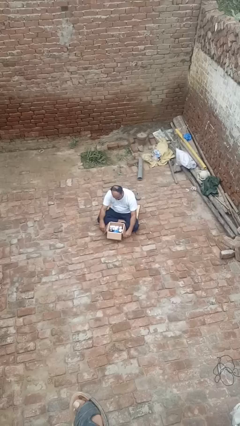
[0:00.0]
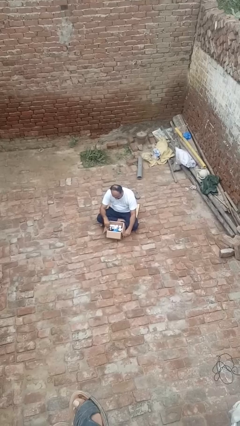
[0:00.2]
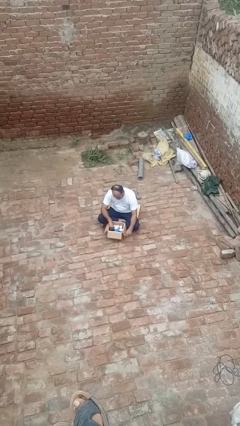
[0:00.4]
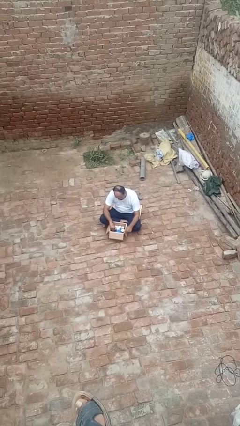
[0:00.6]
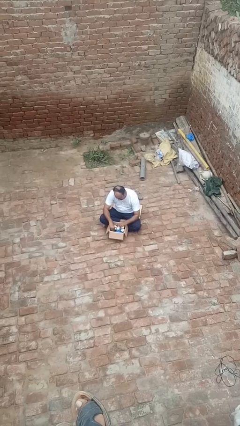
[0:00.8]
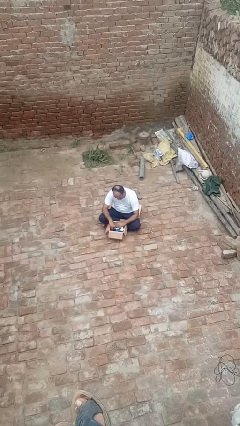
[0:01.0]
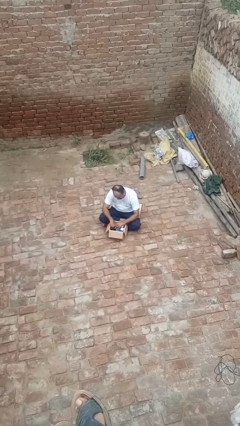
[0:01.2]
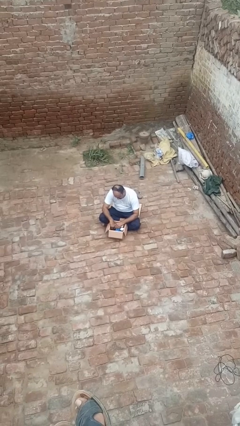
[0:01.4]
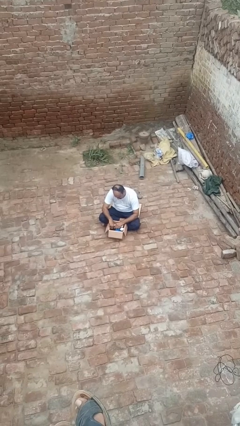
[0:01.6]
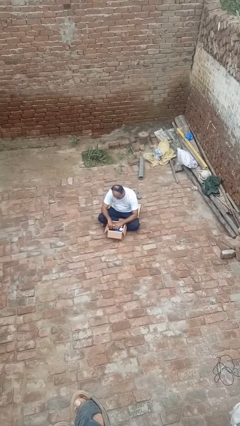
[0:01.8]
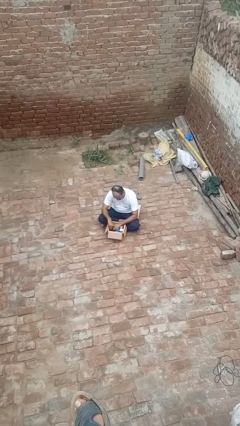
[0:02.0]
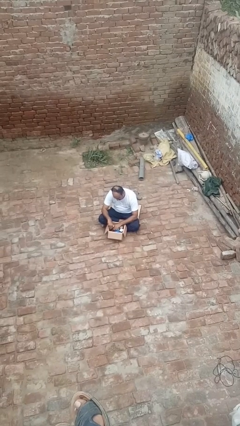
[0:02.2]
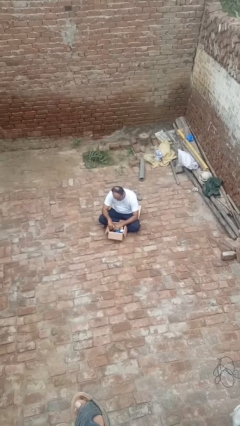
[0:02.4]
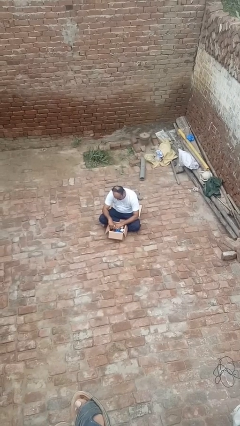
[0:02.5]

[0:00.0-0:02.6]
person searches in box

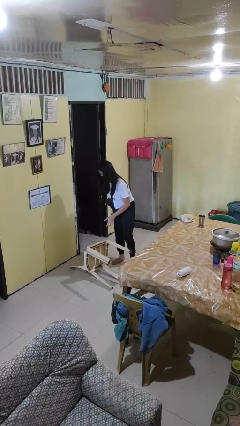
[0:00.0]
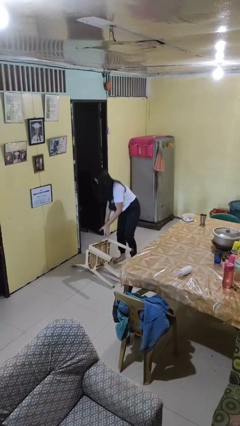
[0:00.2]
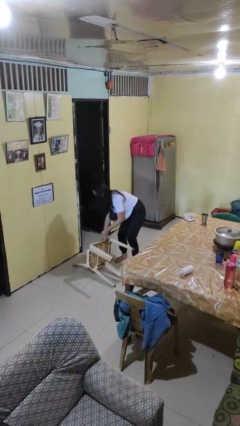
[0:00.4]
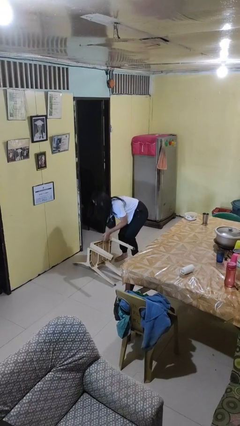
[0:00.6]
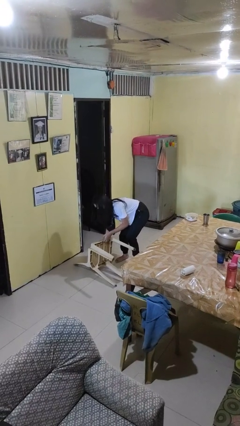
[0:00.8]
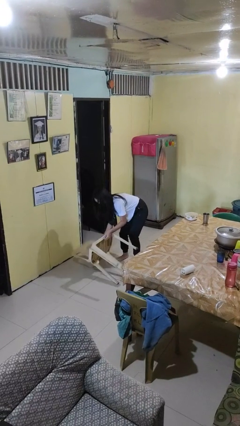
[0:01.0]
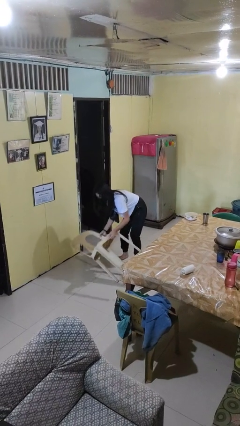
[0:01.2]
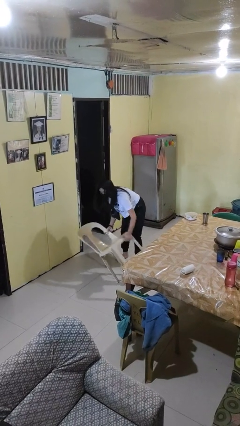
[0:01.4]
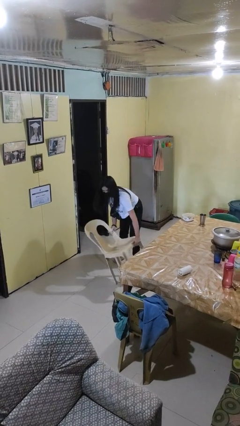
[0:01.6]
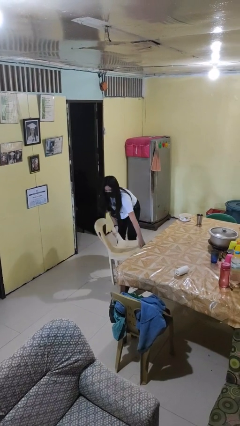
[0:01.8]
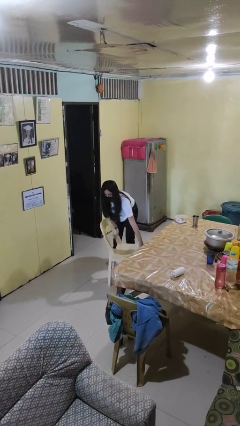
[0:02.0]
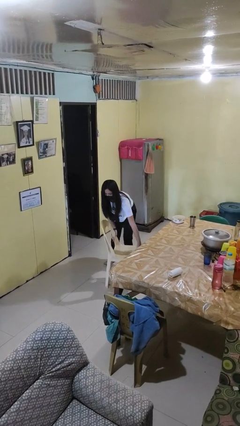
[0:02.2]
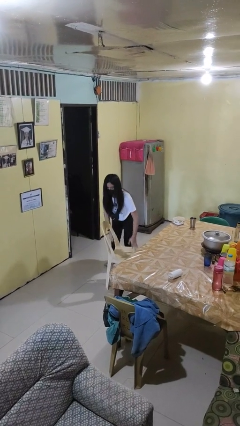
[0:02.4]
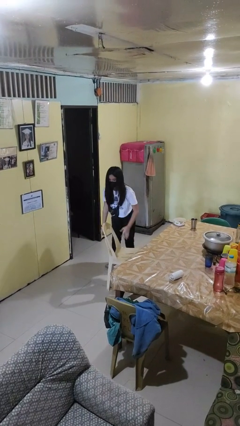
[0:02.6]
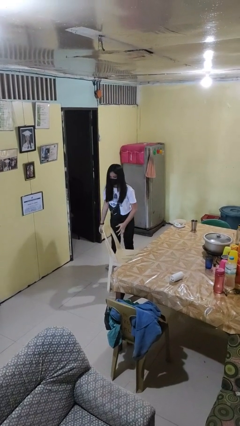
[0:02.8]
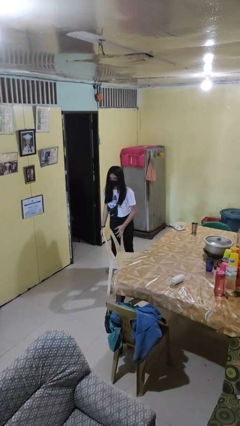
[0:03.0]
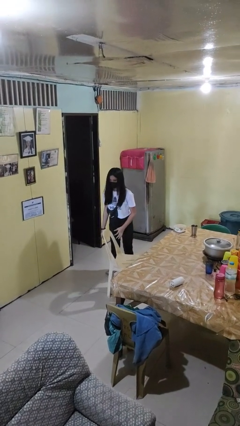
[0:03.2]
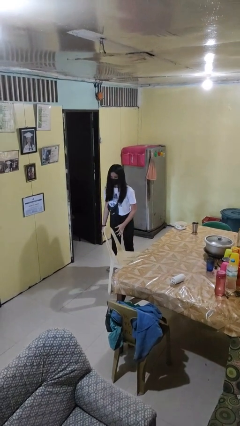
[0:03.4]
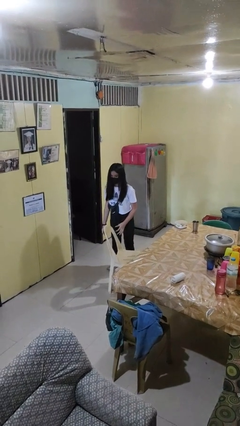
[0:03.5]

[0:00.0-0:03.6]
person sets upright furniture

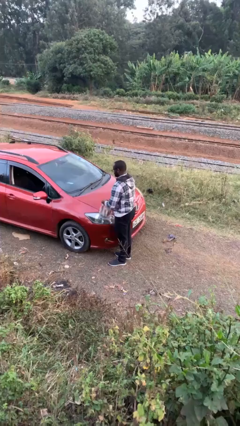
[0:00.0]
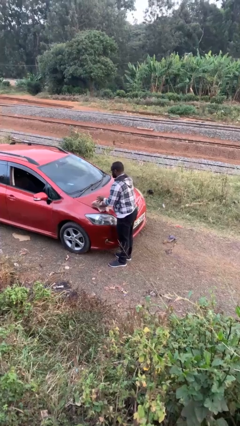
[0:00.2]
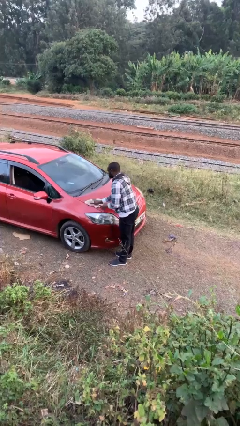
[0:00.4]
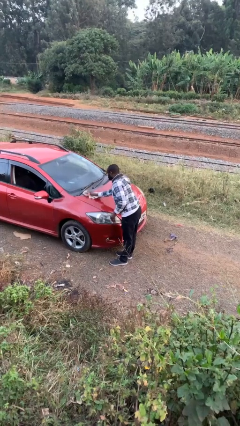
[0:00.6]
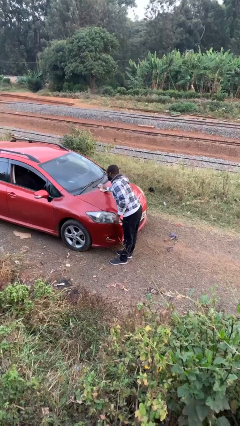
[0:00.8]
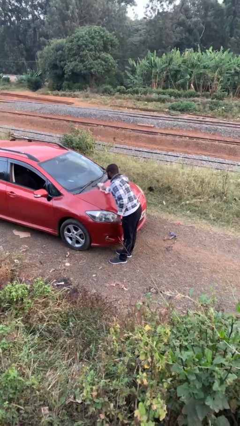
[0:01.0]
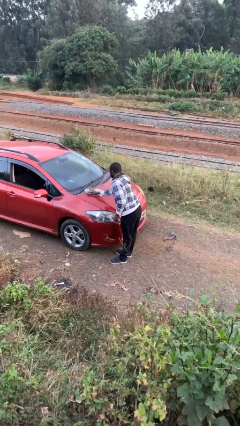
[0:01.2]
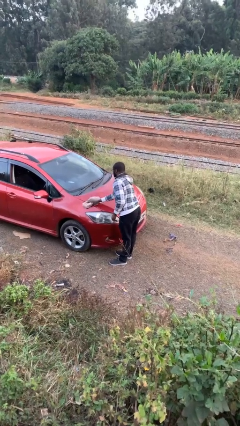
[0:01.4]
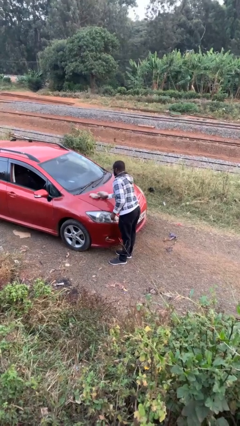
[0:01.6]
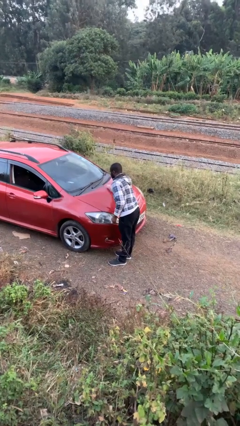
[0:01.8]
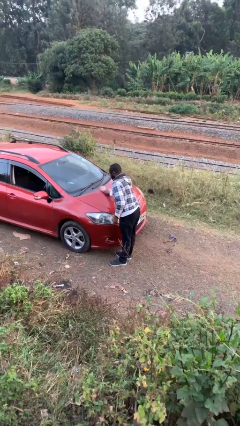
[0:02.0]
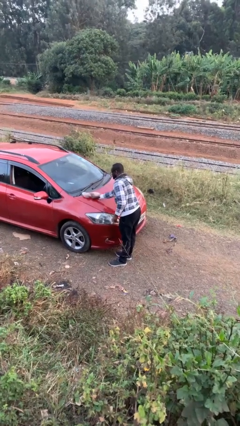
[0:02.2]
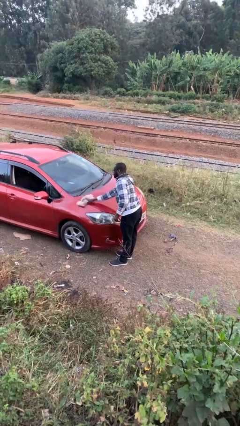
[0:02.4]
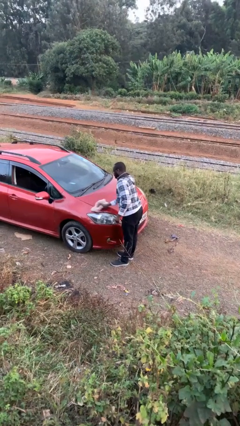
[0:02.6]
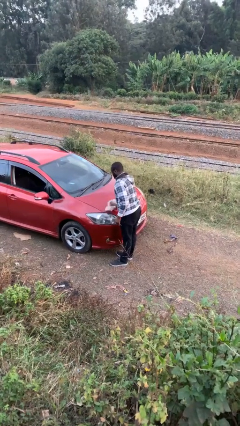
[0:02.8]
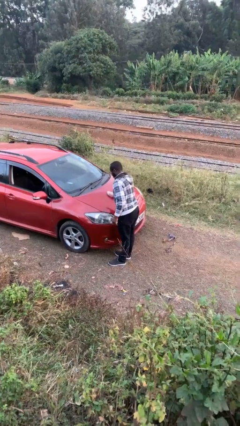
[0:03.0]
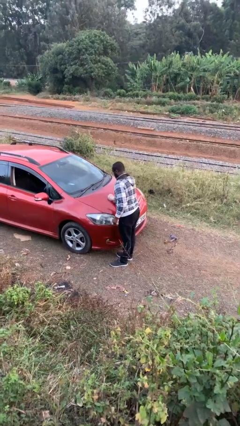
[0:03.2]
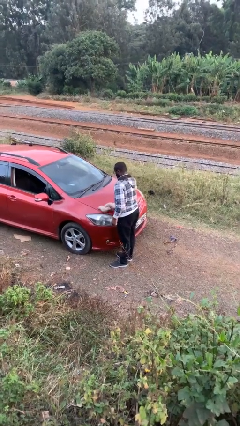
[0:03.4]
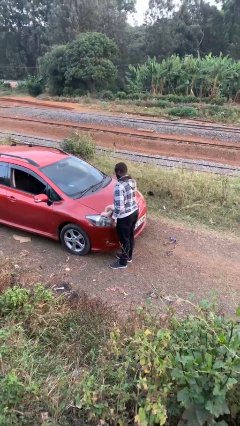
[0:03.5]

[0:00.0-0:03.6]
person polishes car with rag

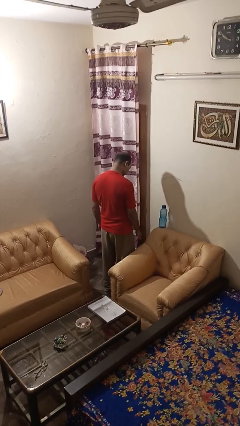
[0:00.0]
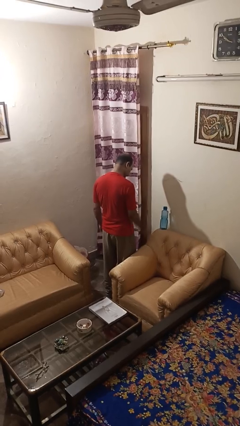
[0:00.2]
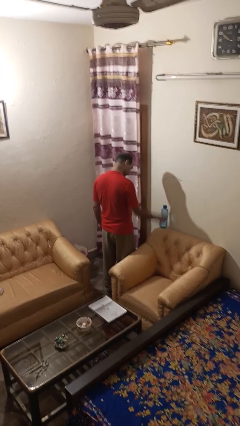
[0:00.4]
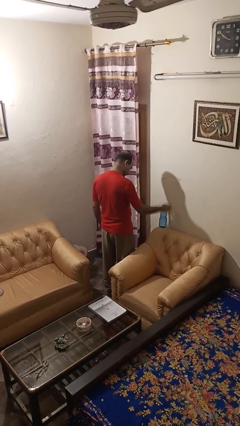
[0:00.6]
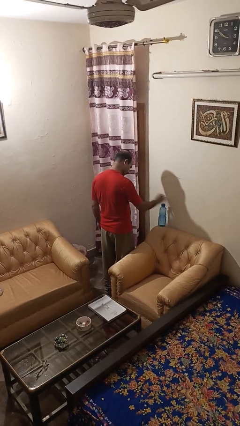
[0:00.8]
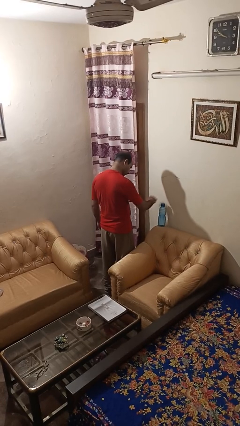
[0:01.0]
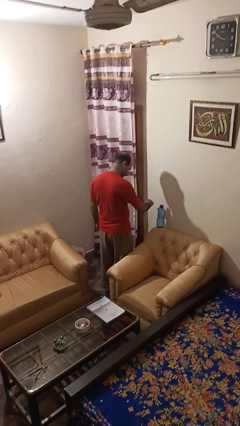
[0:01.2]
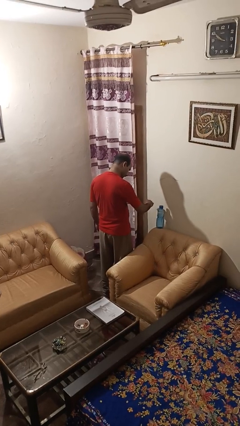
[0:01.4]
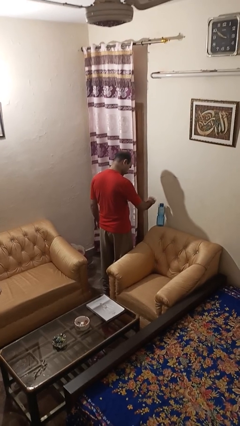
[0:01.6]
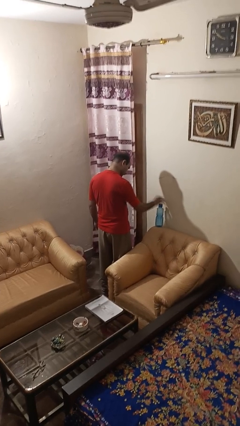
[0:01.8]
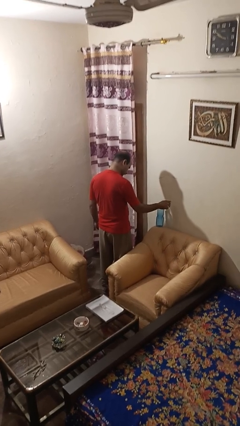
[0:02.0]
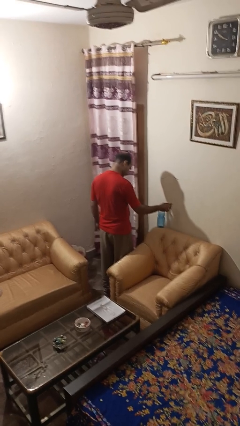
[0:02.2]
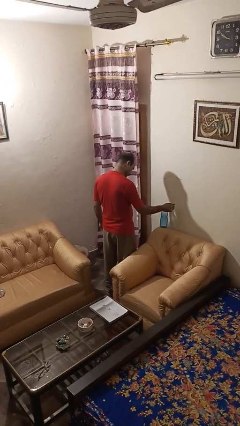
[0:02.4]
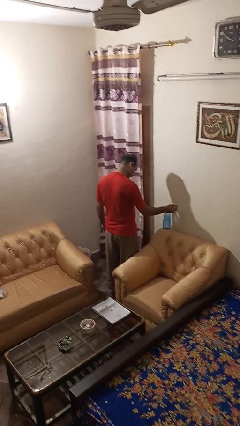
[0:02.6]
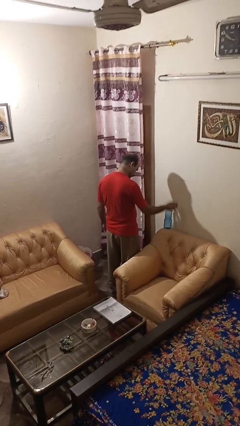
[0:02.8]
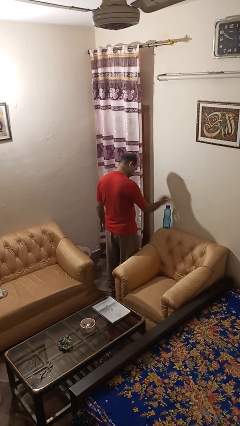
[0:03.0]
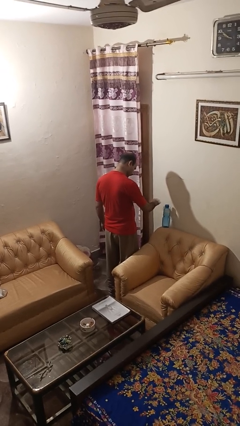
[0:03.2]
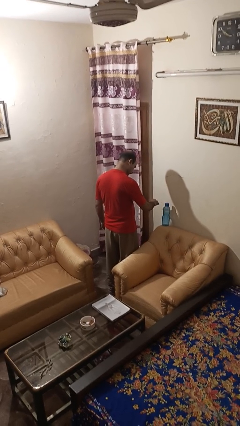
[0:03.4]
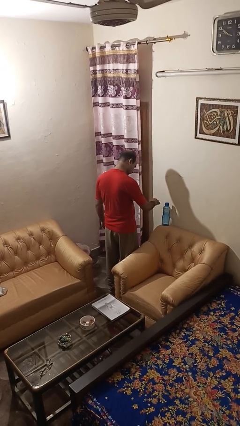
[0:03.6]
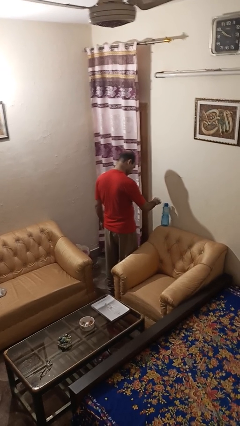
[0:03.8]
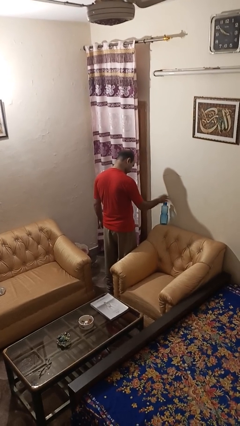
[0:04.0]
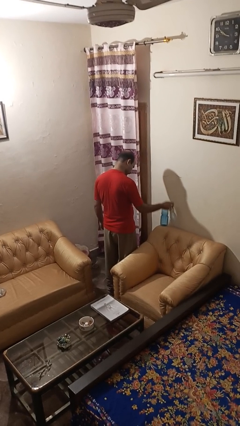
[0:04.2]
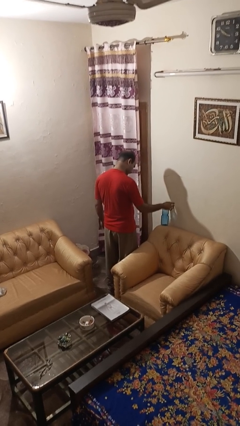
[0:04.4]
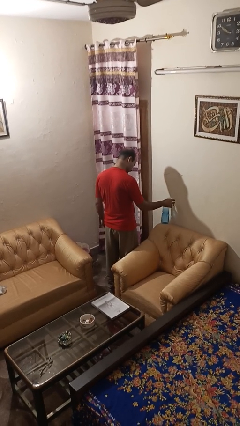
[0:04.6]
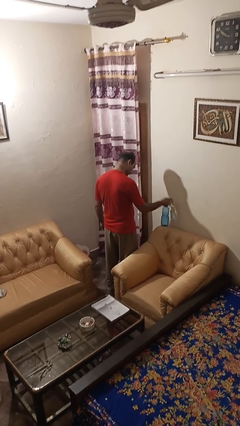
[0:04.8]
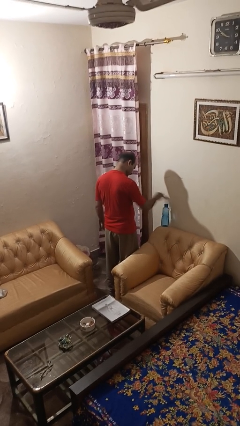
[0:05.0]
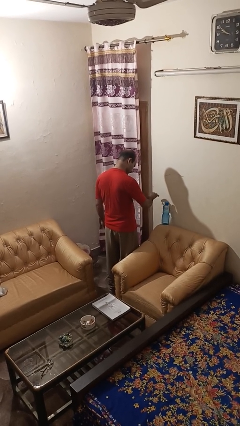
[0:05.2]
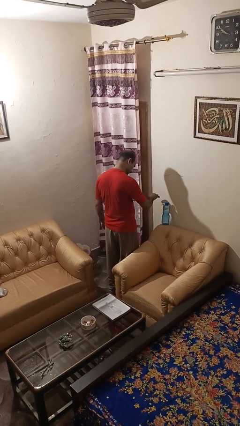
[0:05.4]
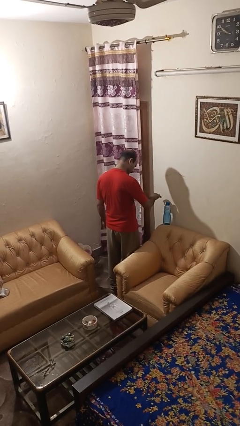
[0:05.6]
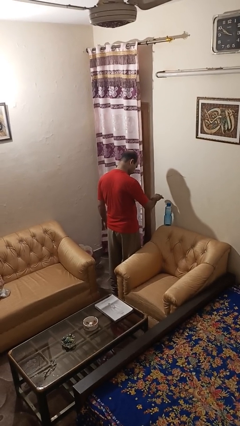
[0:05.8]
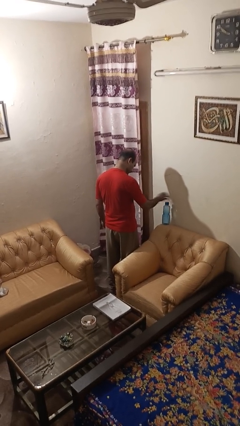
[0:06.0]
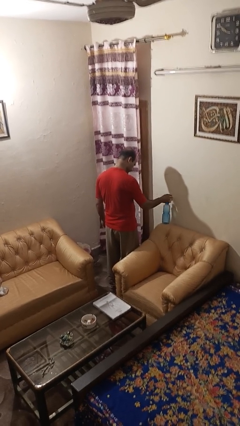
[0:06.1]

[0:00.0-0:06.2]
person waves hand over object

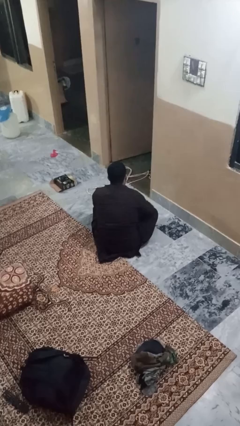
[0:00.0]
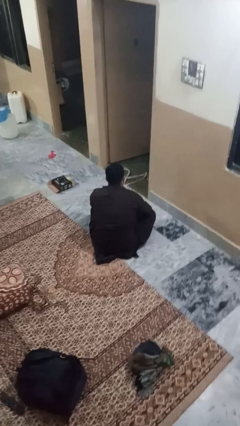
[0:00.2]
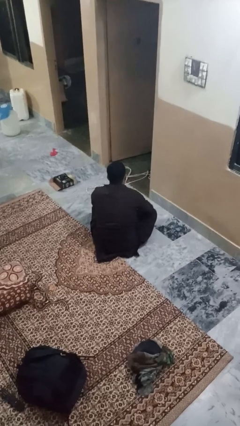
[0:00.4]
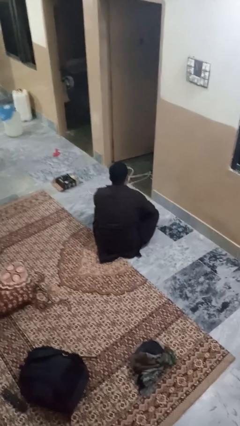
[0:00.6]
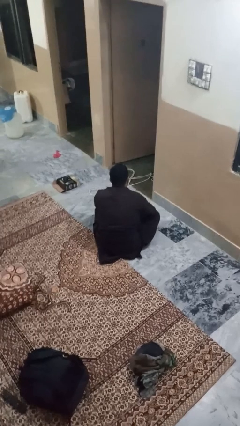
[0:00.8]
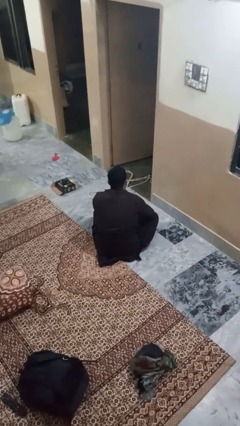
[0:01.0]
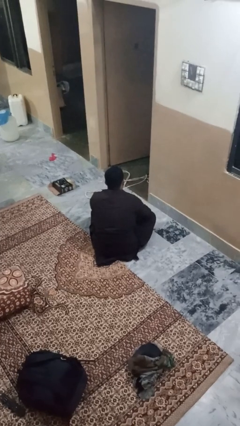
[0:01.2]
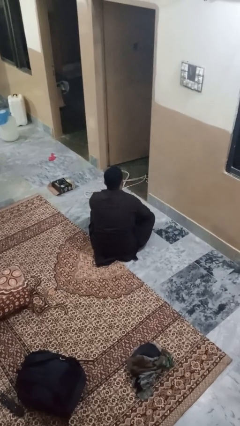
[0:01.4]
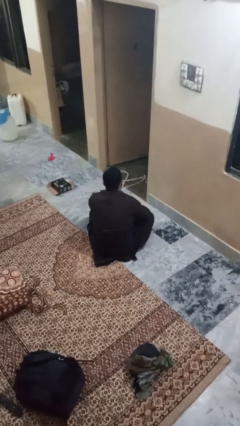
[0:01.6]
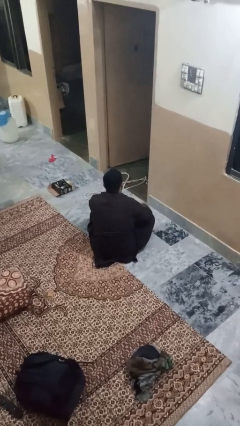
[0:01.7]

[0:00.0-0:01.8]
person gestures heart
